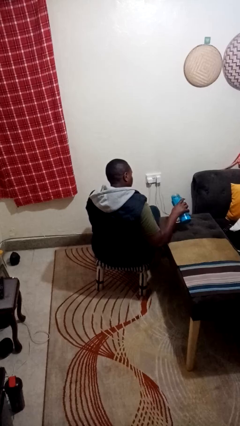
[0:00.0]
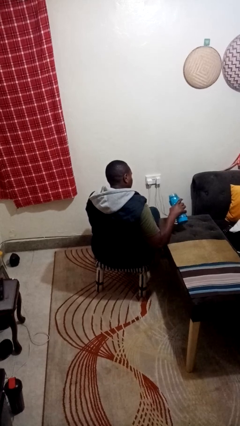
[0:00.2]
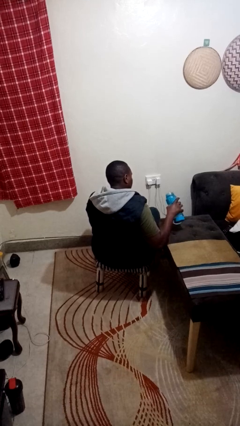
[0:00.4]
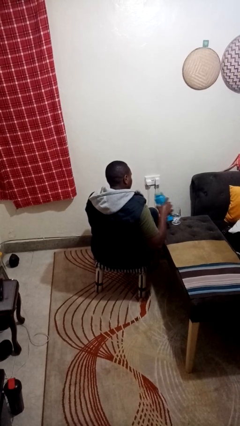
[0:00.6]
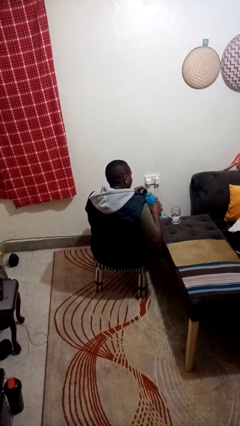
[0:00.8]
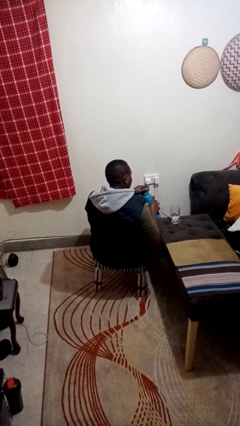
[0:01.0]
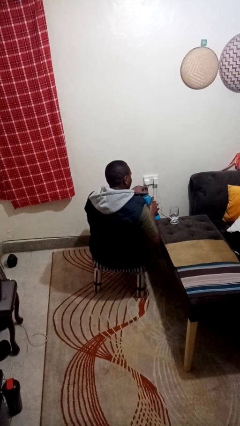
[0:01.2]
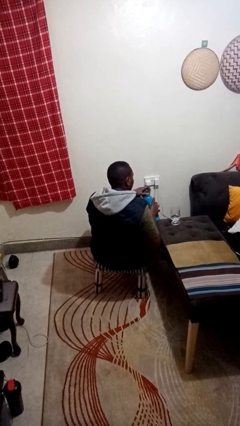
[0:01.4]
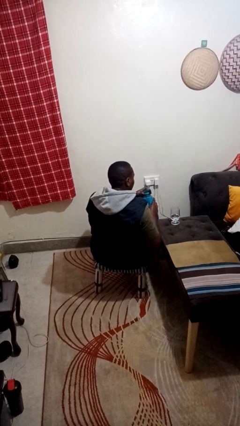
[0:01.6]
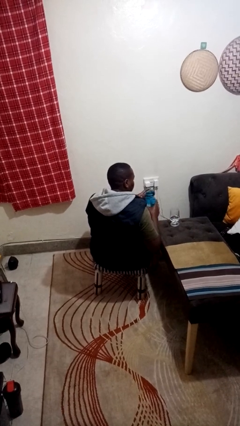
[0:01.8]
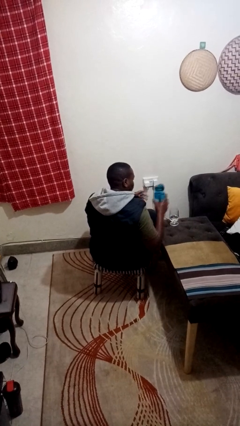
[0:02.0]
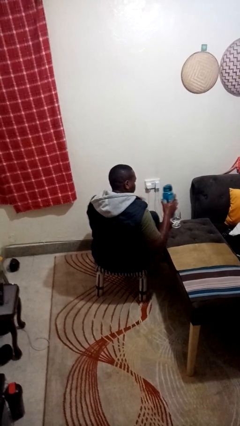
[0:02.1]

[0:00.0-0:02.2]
person screws lid to bottle

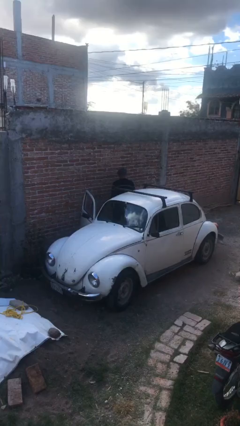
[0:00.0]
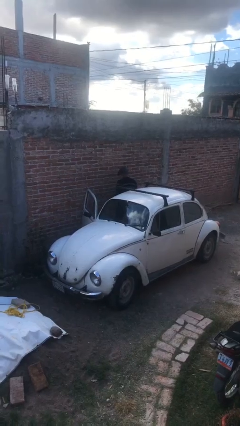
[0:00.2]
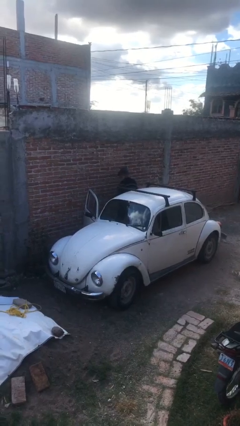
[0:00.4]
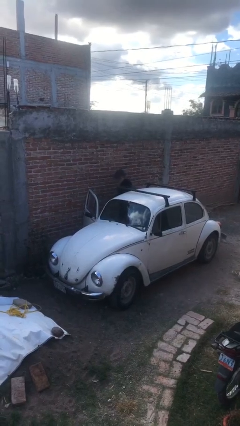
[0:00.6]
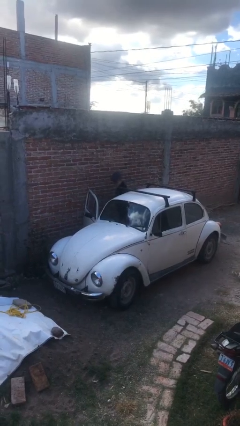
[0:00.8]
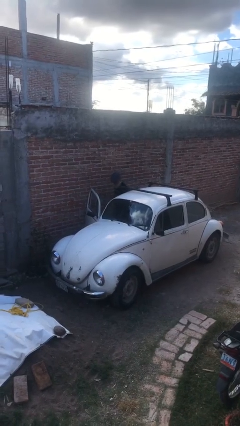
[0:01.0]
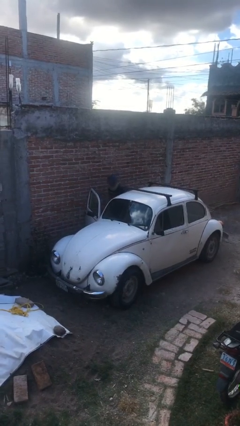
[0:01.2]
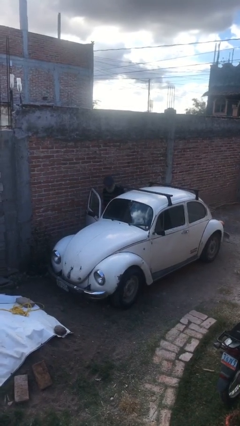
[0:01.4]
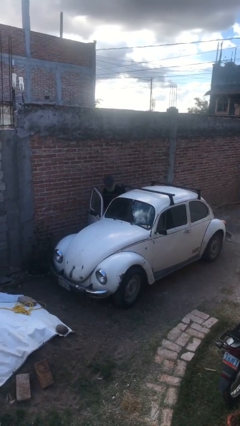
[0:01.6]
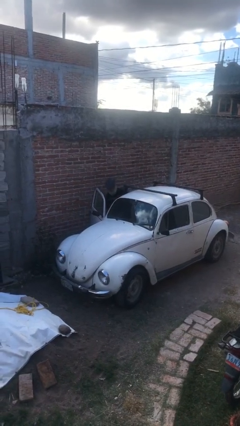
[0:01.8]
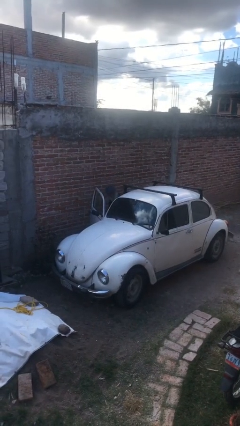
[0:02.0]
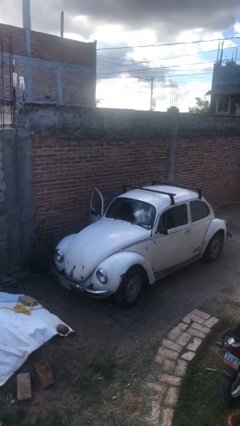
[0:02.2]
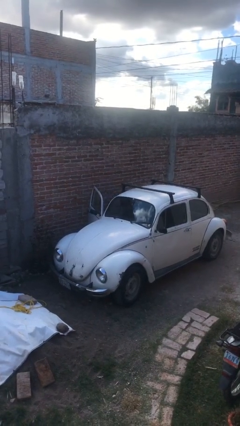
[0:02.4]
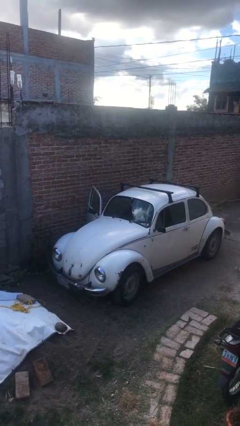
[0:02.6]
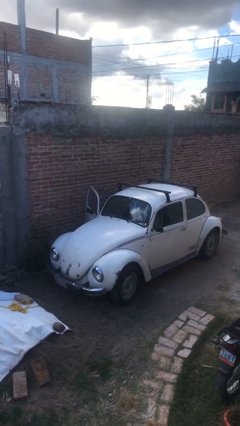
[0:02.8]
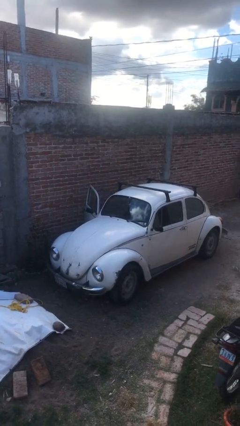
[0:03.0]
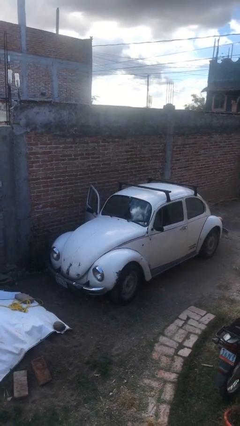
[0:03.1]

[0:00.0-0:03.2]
person enters car

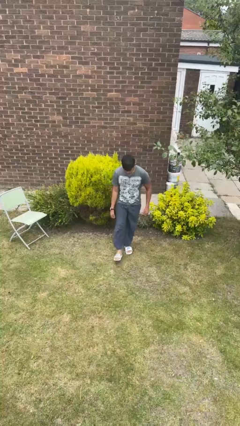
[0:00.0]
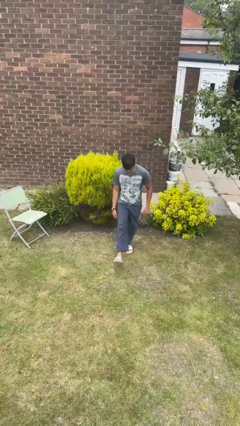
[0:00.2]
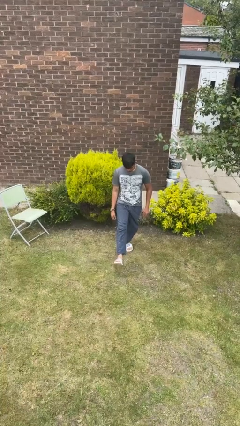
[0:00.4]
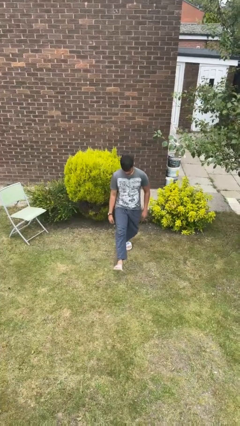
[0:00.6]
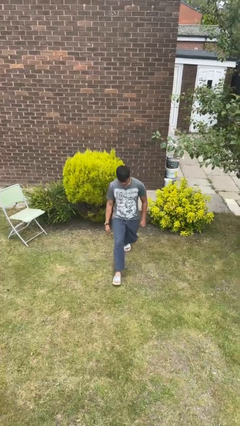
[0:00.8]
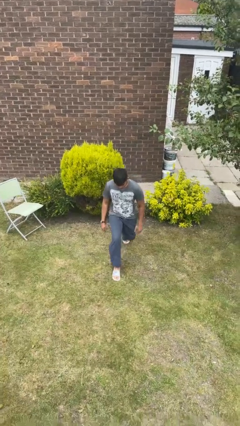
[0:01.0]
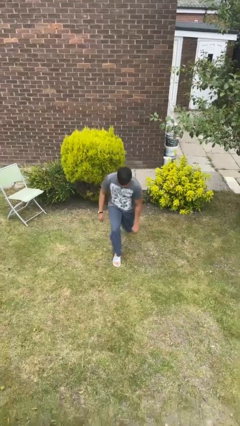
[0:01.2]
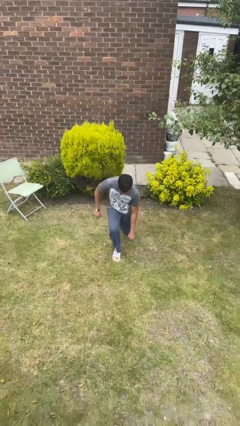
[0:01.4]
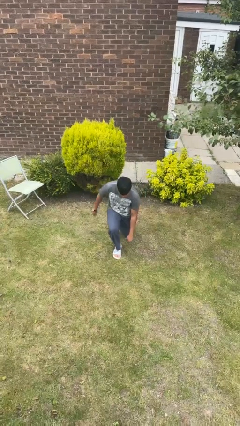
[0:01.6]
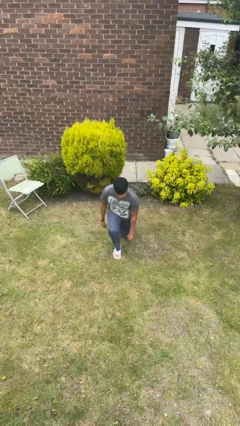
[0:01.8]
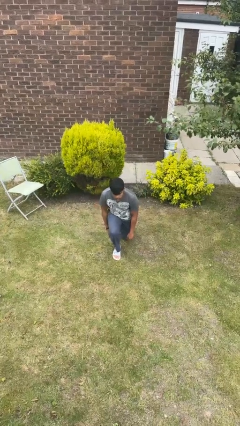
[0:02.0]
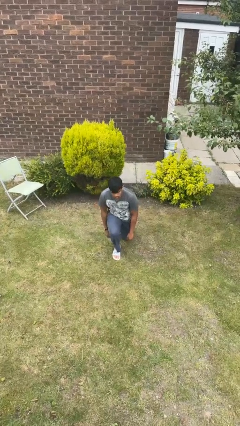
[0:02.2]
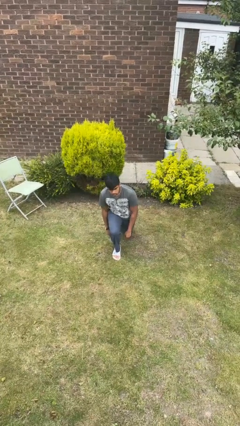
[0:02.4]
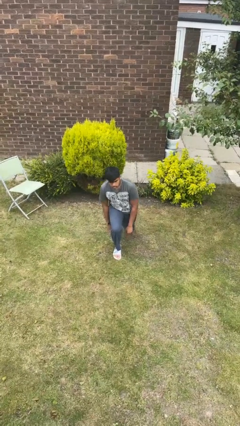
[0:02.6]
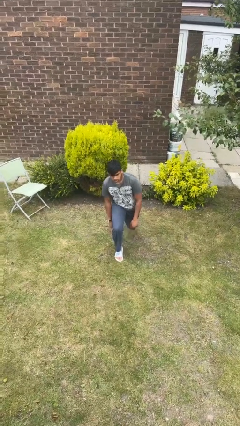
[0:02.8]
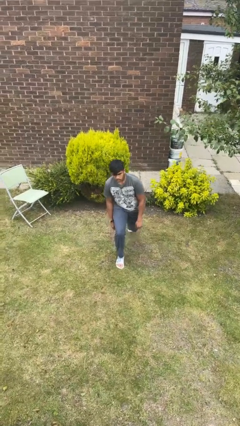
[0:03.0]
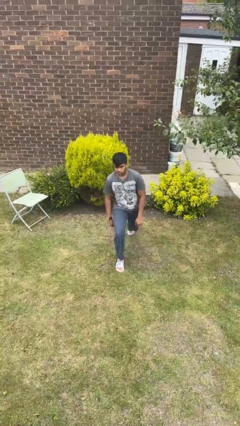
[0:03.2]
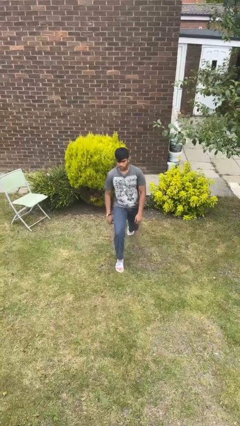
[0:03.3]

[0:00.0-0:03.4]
person exercises with lunges

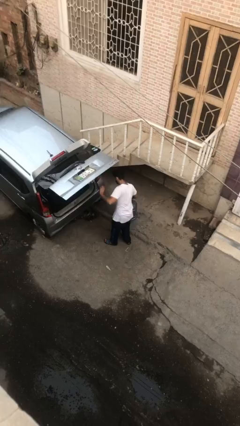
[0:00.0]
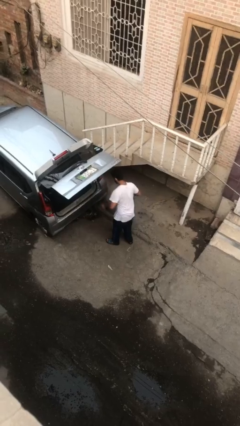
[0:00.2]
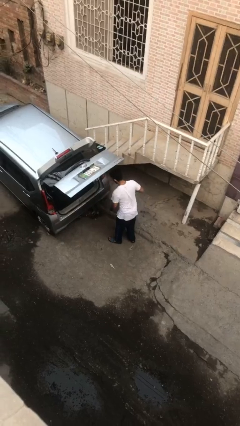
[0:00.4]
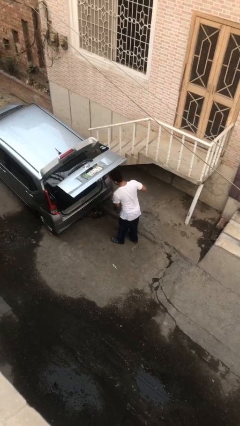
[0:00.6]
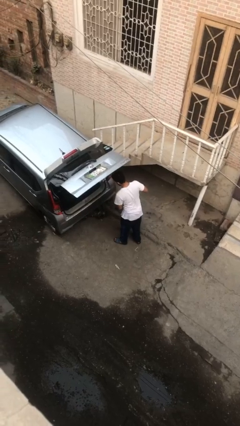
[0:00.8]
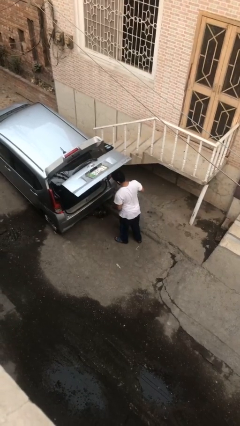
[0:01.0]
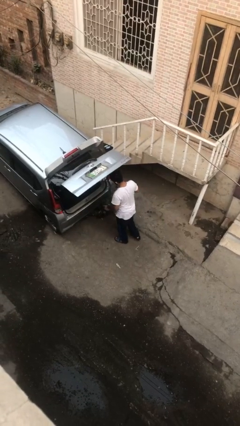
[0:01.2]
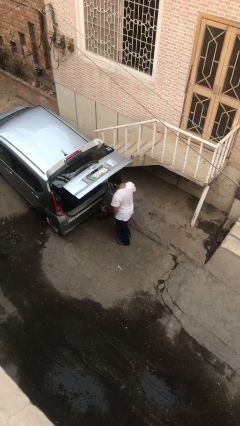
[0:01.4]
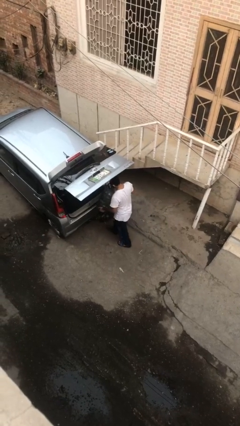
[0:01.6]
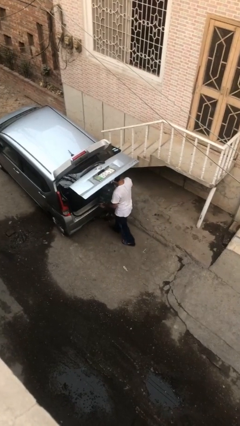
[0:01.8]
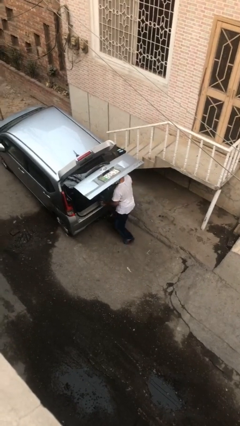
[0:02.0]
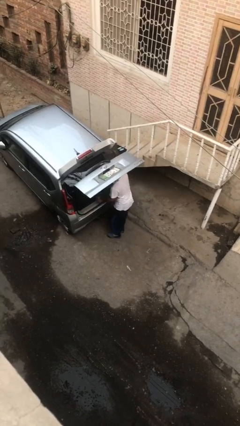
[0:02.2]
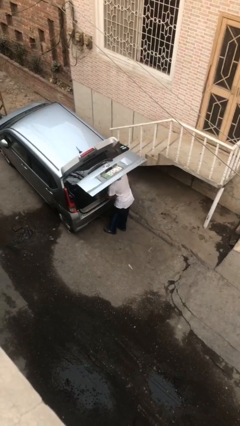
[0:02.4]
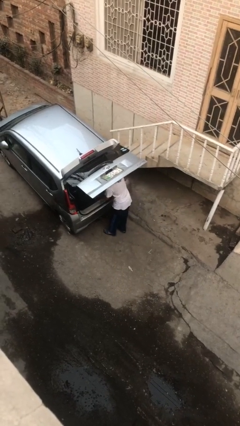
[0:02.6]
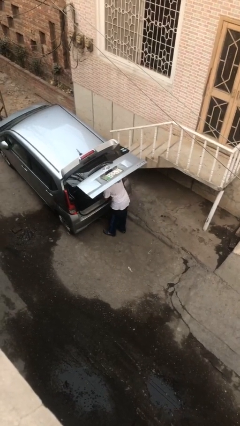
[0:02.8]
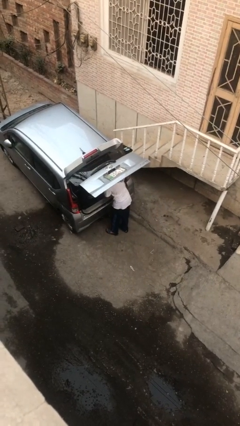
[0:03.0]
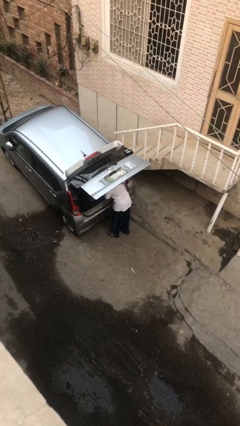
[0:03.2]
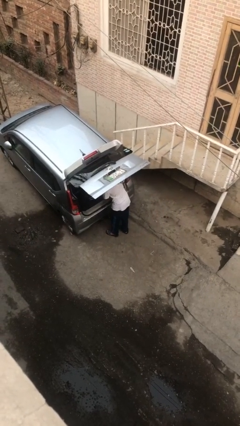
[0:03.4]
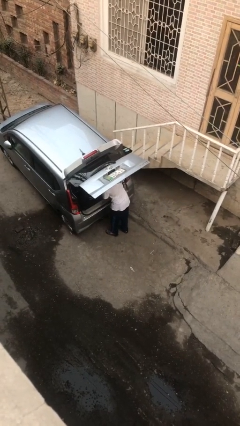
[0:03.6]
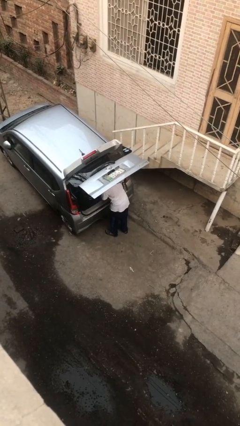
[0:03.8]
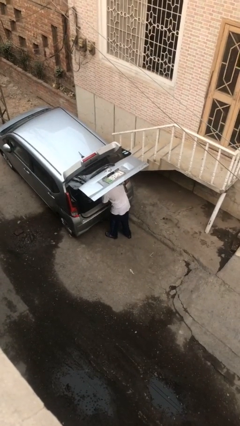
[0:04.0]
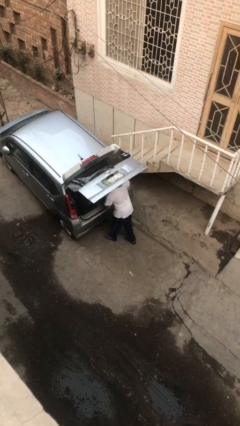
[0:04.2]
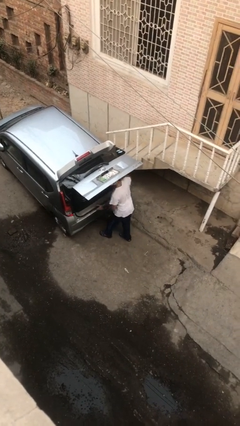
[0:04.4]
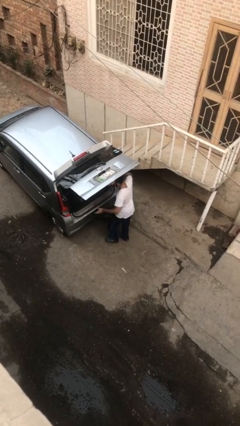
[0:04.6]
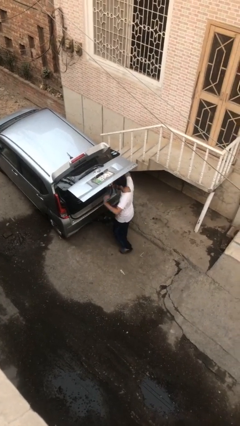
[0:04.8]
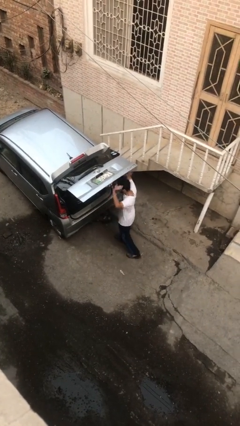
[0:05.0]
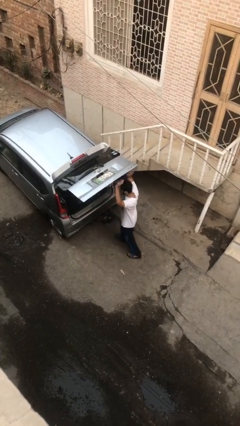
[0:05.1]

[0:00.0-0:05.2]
person loads car

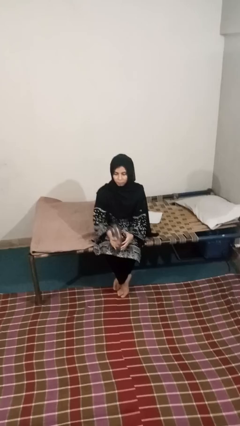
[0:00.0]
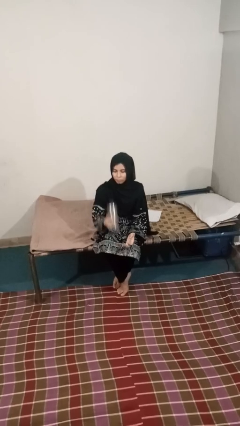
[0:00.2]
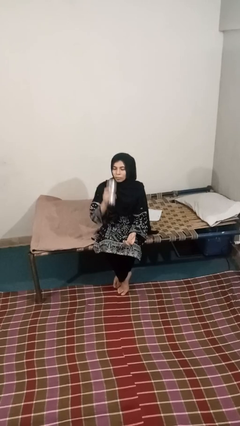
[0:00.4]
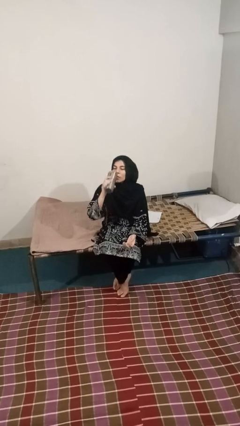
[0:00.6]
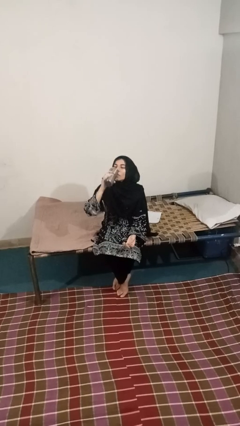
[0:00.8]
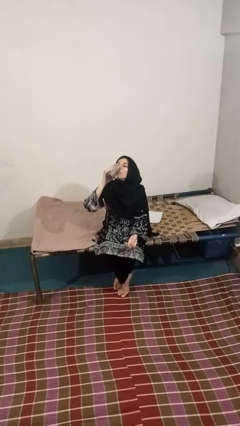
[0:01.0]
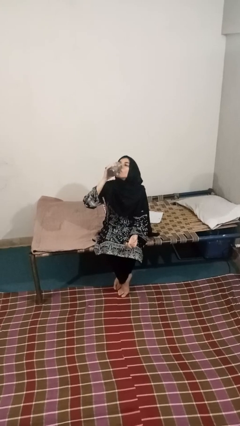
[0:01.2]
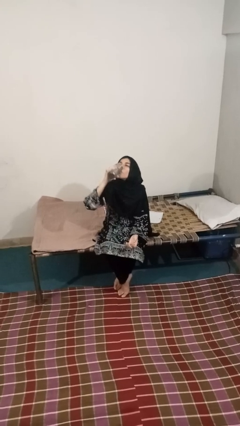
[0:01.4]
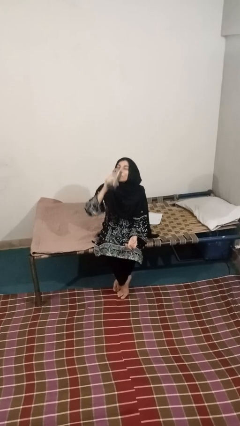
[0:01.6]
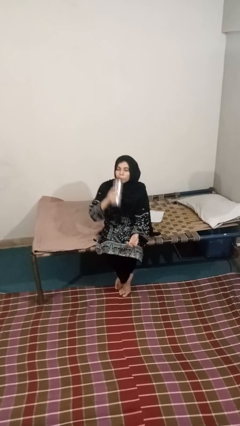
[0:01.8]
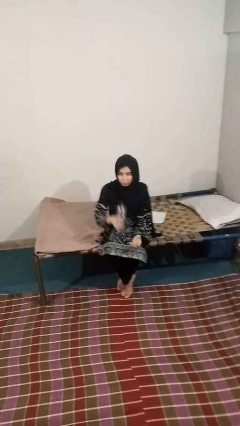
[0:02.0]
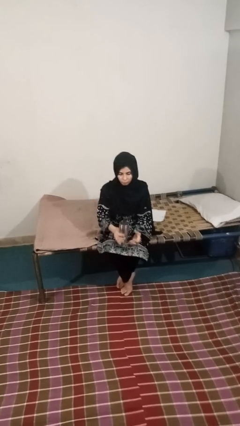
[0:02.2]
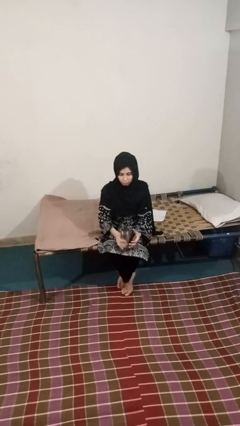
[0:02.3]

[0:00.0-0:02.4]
person drinks from beverage can

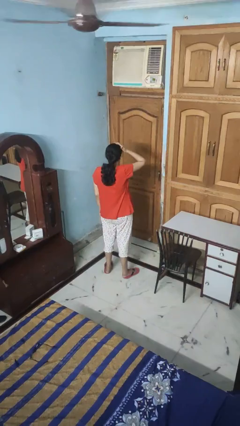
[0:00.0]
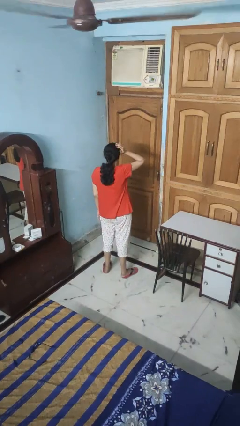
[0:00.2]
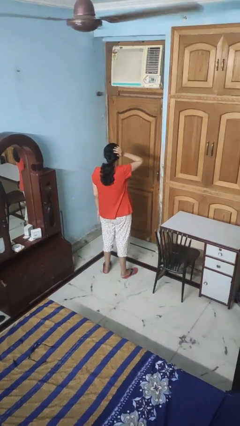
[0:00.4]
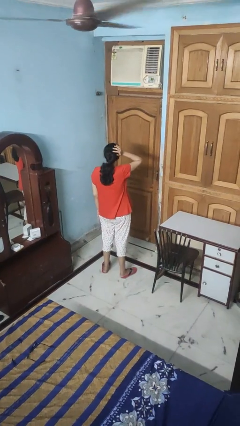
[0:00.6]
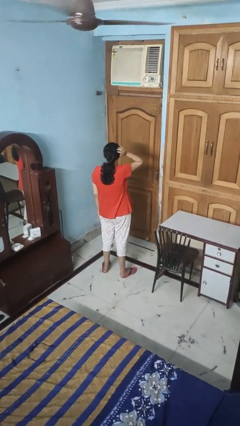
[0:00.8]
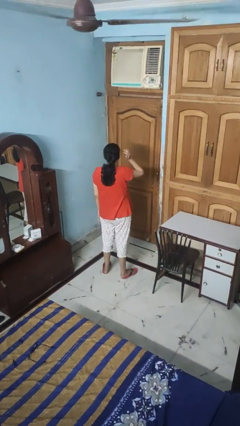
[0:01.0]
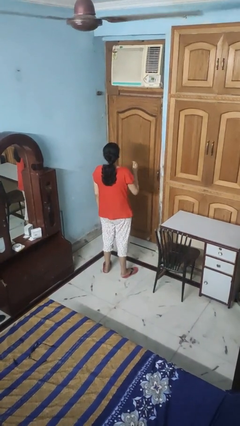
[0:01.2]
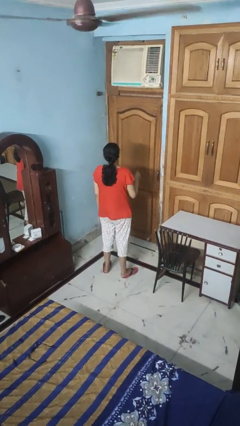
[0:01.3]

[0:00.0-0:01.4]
person pats head
